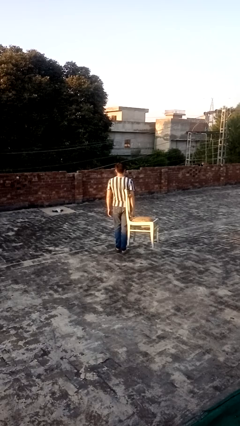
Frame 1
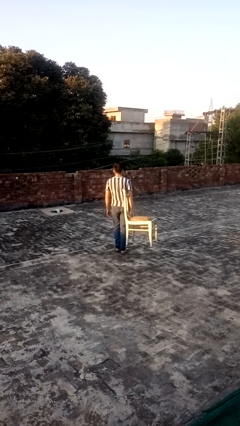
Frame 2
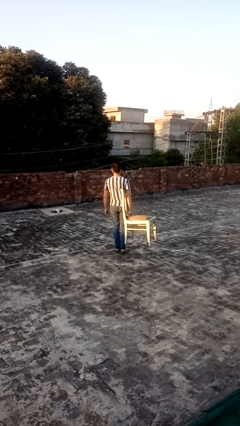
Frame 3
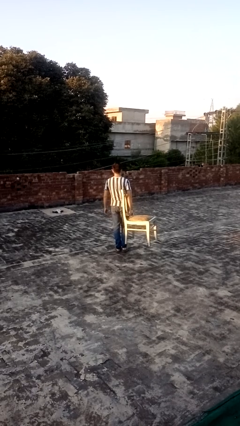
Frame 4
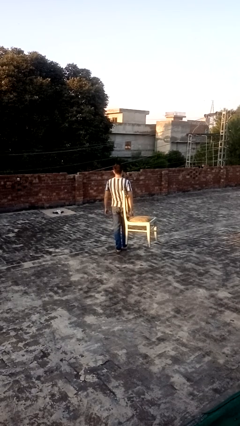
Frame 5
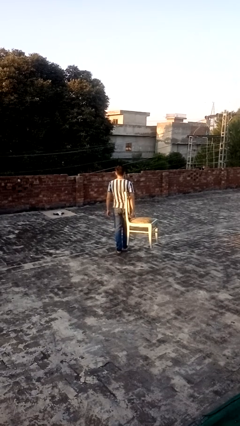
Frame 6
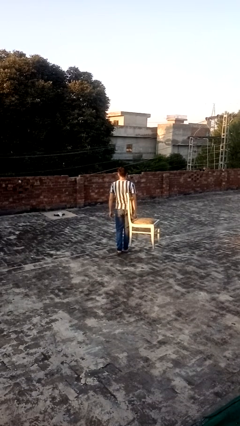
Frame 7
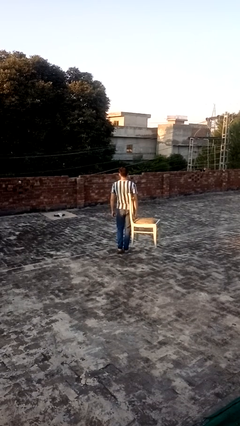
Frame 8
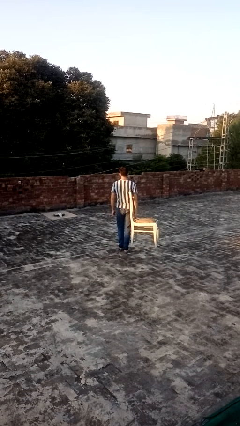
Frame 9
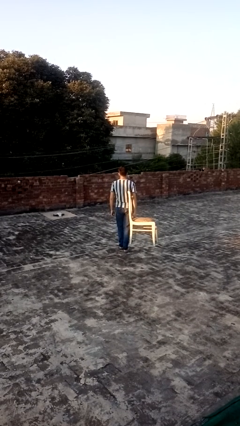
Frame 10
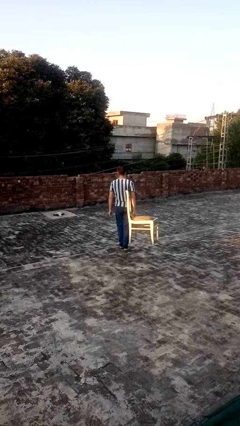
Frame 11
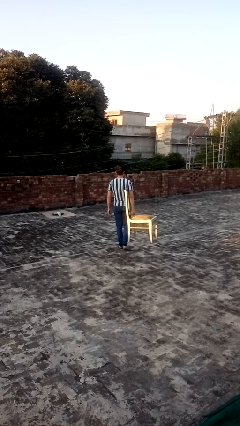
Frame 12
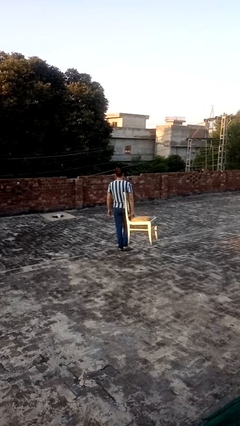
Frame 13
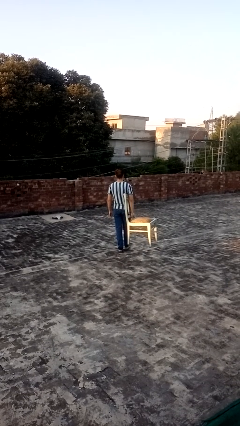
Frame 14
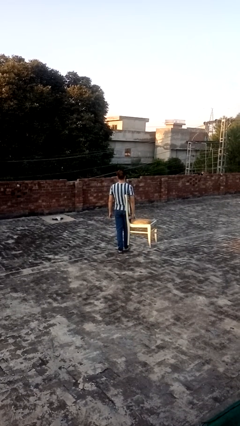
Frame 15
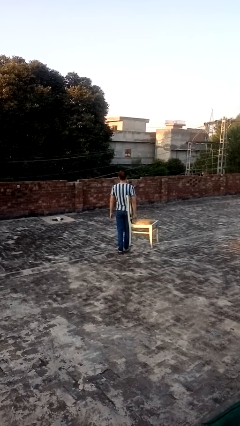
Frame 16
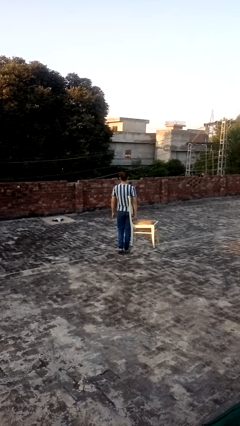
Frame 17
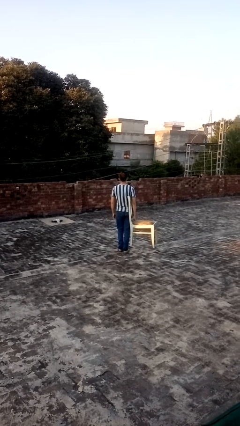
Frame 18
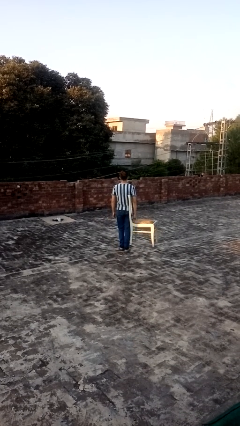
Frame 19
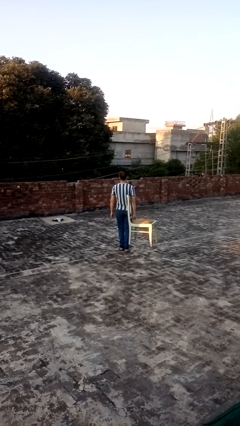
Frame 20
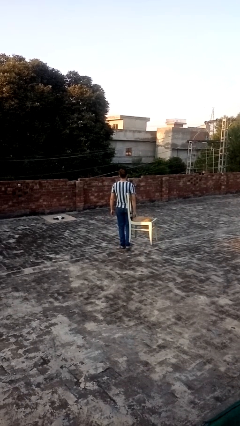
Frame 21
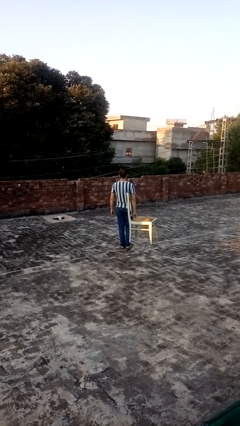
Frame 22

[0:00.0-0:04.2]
person carries furniture

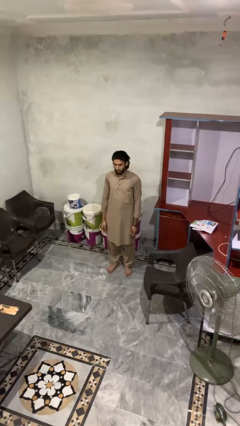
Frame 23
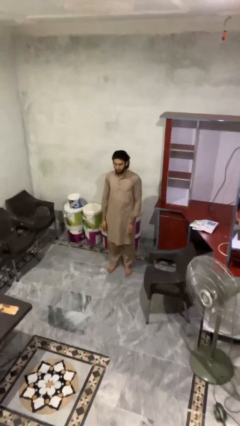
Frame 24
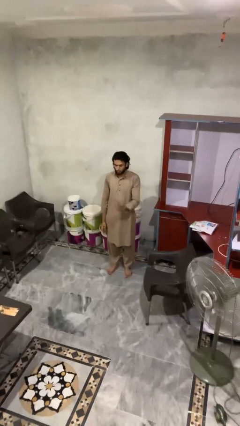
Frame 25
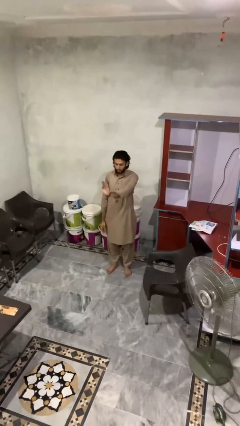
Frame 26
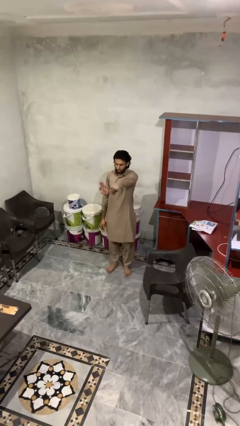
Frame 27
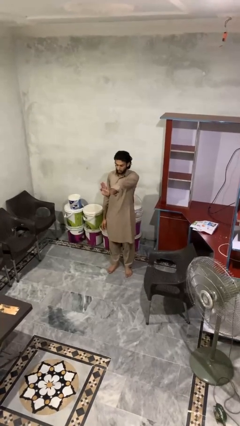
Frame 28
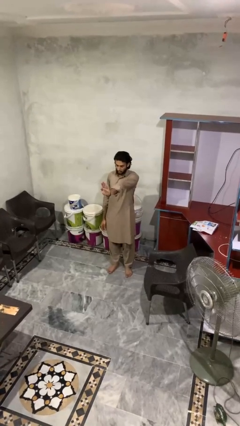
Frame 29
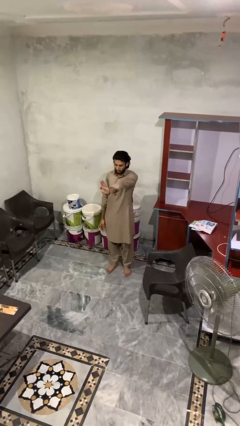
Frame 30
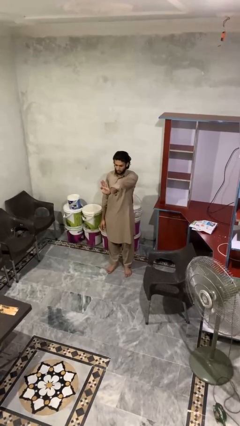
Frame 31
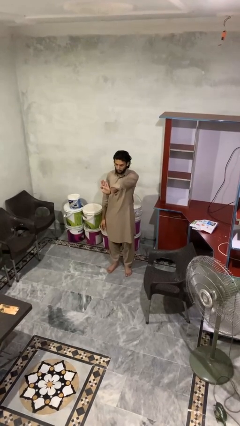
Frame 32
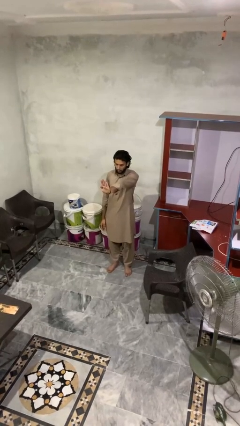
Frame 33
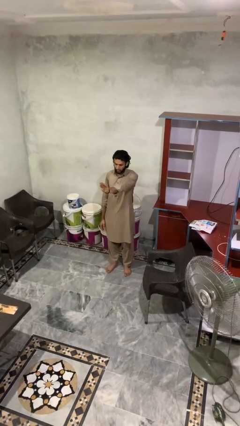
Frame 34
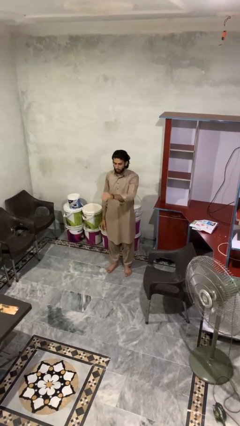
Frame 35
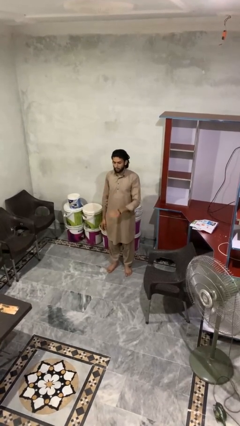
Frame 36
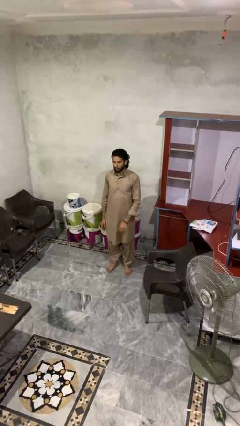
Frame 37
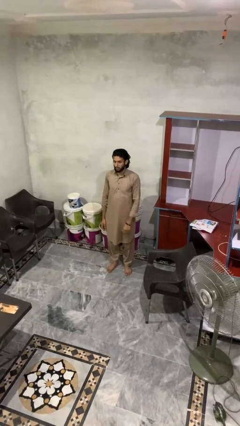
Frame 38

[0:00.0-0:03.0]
person gestures stop

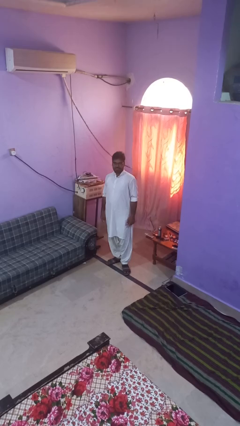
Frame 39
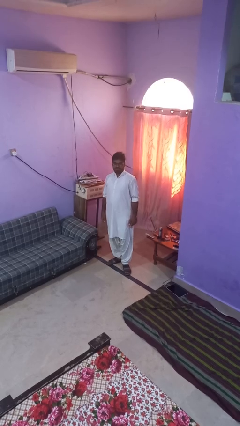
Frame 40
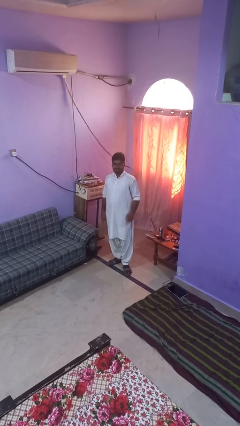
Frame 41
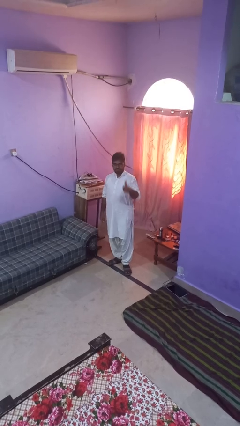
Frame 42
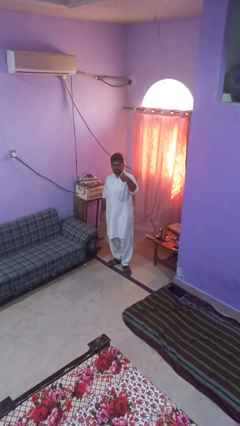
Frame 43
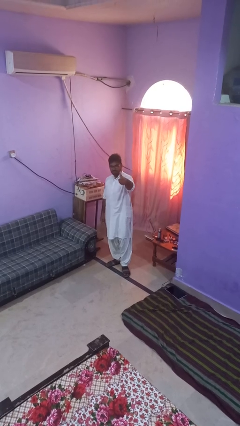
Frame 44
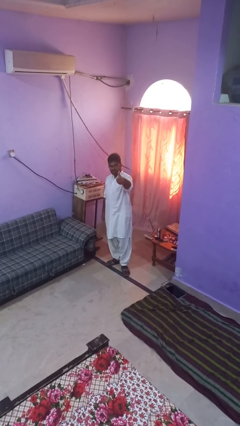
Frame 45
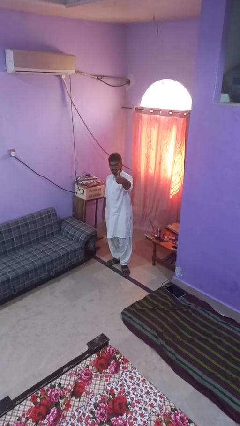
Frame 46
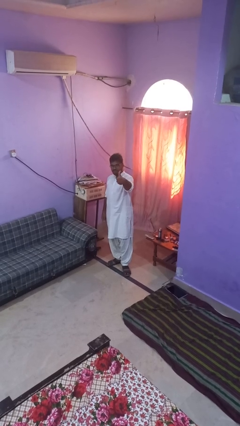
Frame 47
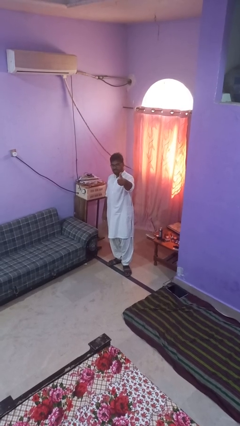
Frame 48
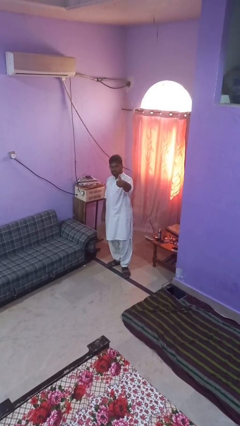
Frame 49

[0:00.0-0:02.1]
person gestures thumbs up

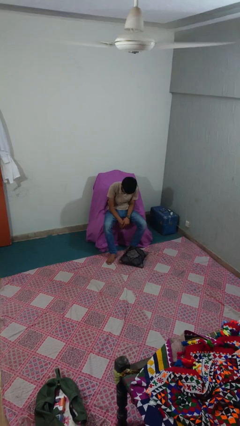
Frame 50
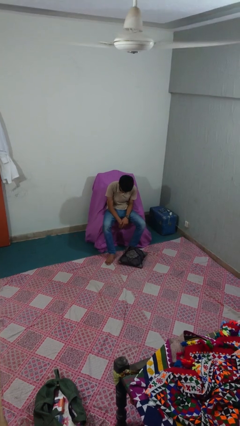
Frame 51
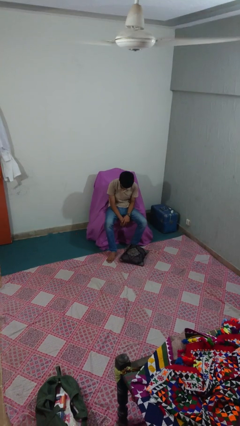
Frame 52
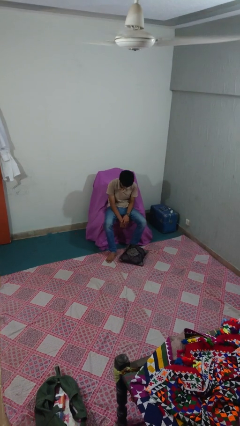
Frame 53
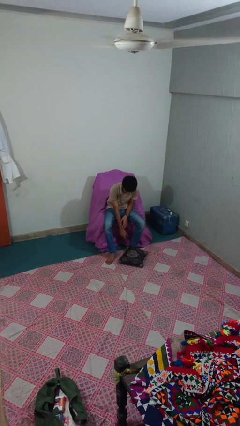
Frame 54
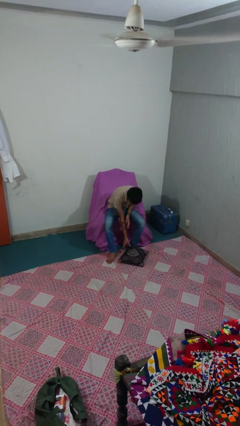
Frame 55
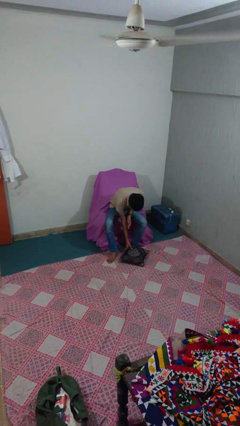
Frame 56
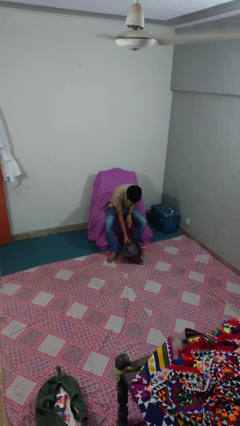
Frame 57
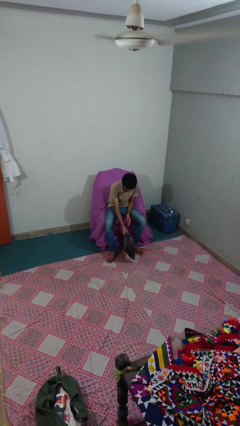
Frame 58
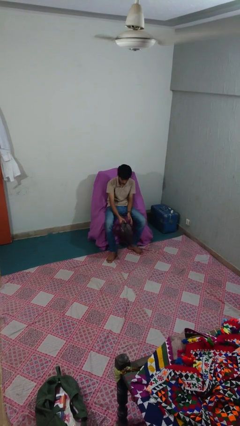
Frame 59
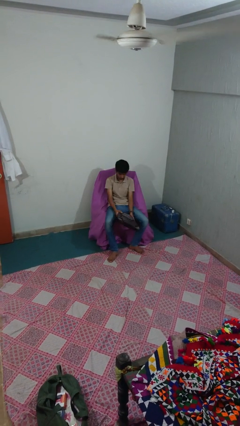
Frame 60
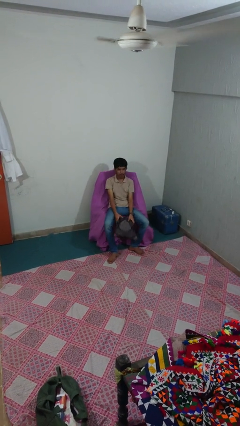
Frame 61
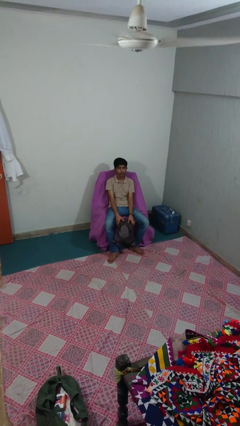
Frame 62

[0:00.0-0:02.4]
person picks up object from floor

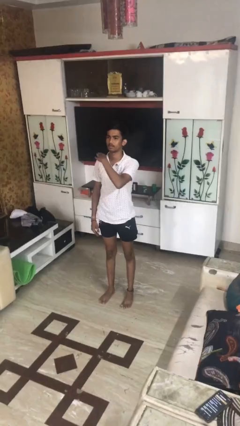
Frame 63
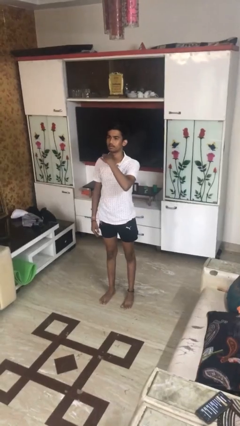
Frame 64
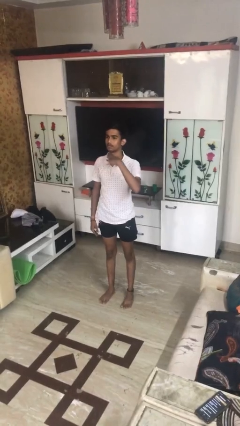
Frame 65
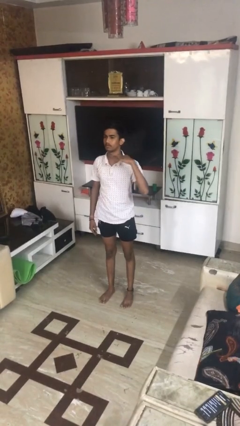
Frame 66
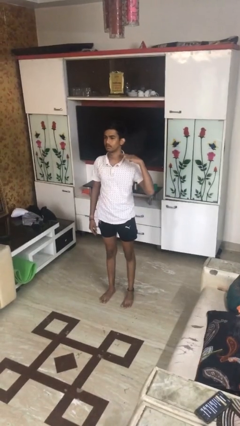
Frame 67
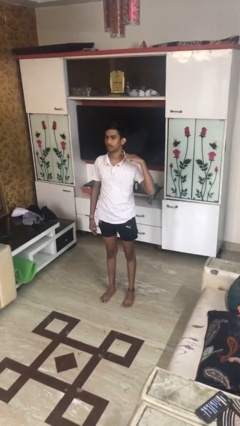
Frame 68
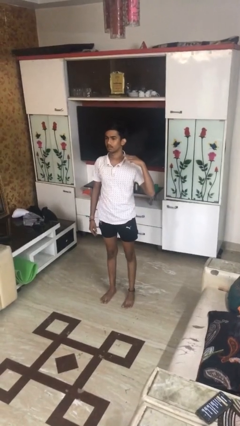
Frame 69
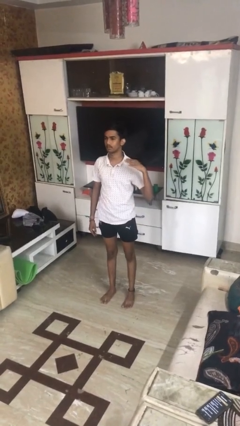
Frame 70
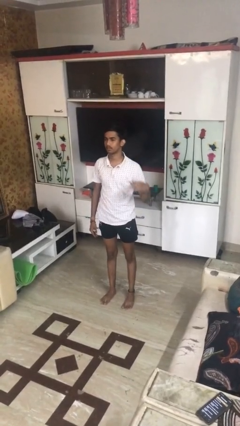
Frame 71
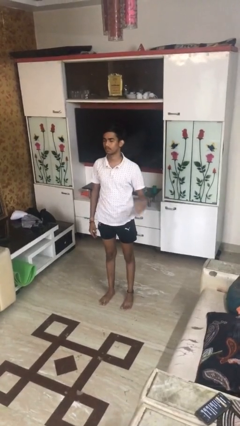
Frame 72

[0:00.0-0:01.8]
person gestures cut

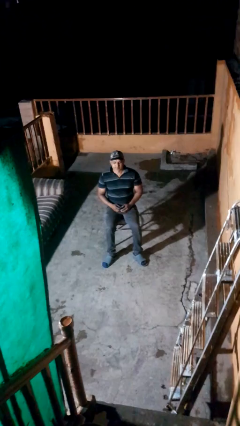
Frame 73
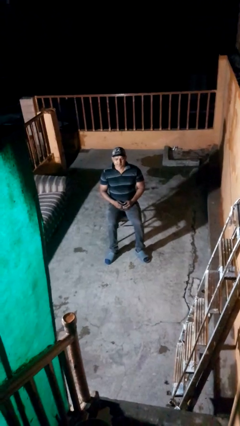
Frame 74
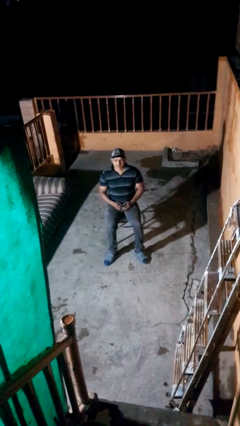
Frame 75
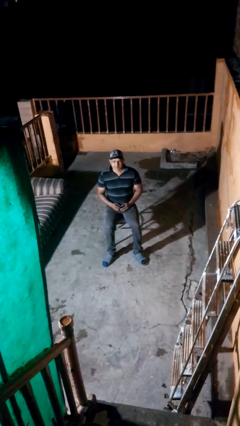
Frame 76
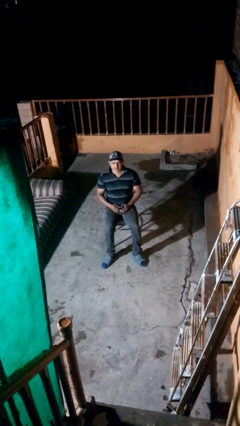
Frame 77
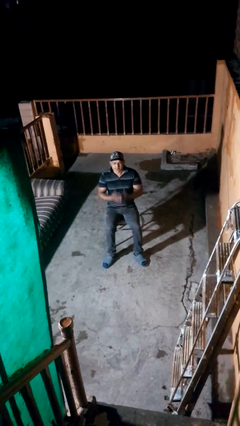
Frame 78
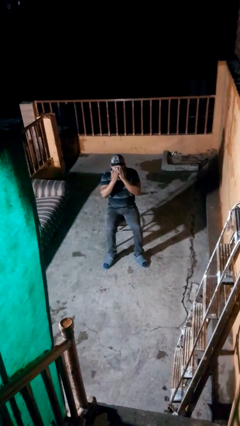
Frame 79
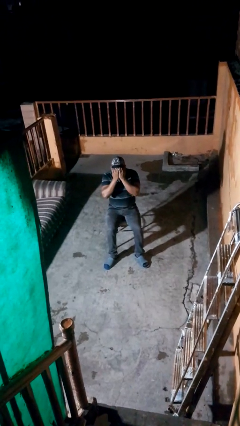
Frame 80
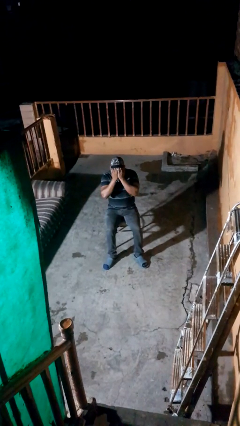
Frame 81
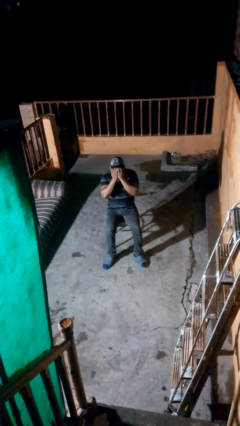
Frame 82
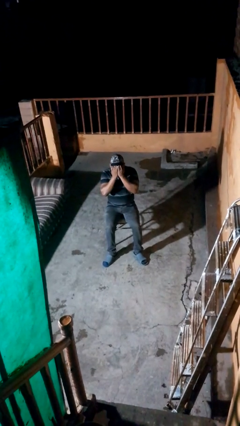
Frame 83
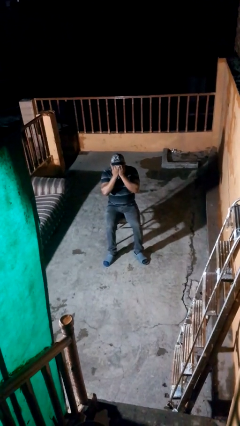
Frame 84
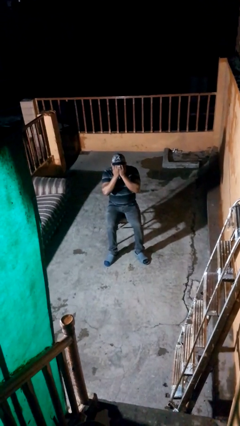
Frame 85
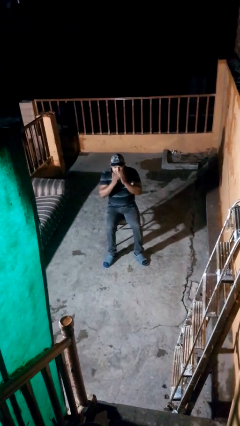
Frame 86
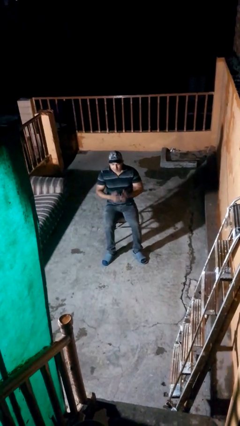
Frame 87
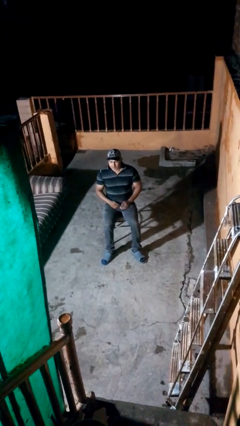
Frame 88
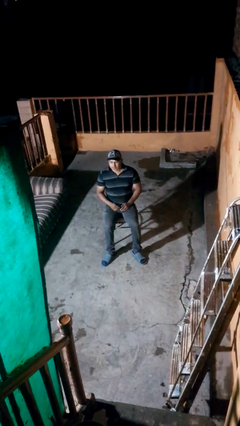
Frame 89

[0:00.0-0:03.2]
person covers face with hands

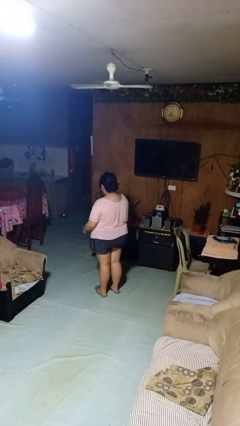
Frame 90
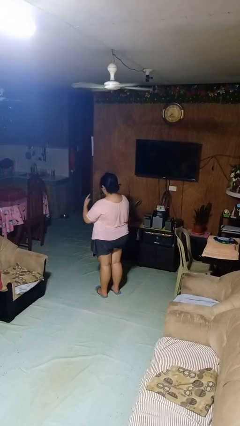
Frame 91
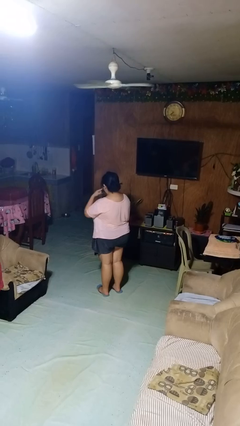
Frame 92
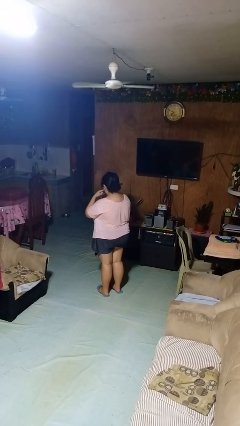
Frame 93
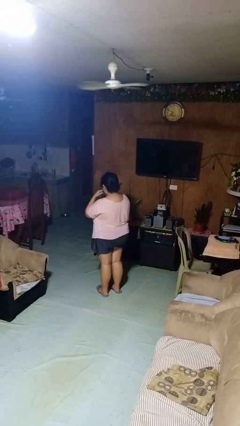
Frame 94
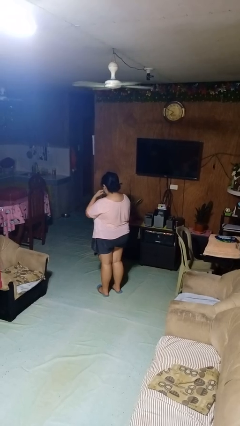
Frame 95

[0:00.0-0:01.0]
person licks fingers
